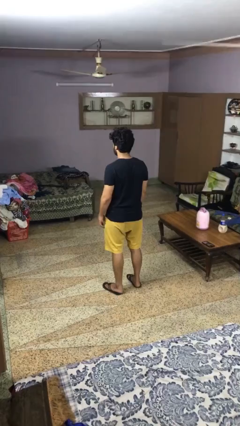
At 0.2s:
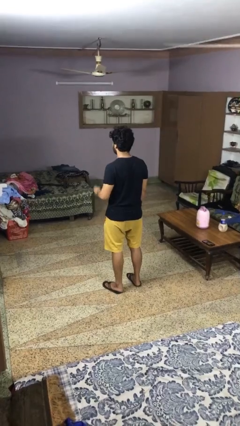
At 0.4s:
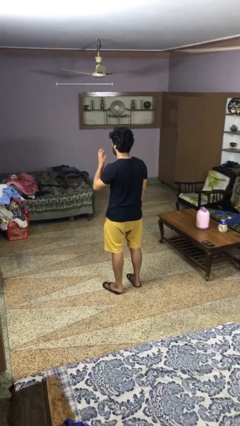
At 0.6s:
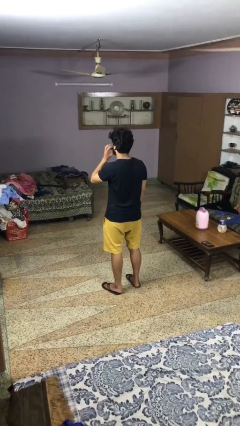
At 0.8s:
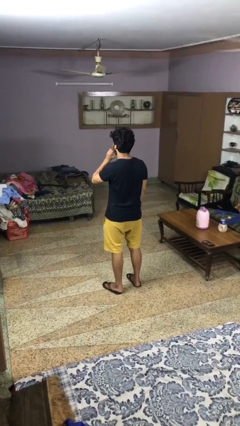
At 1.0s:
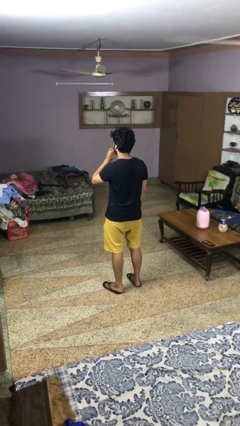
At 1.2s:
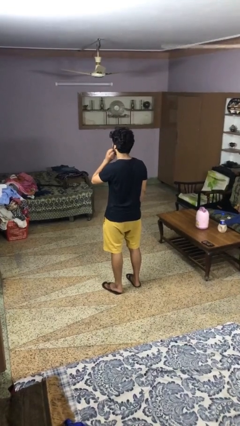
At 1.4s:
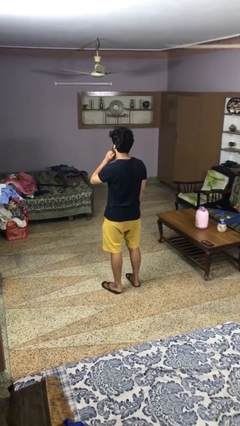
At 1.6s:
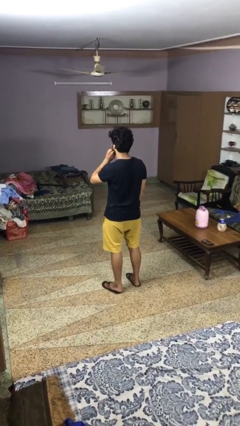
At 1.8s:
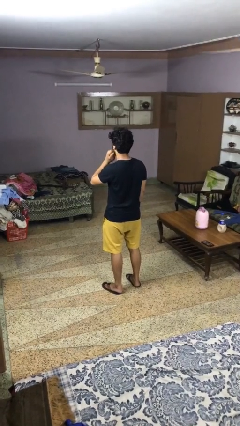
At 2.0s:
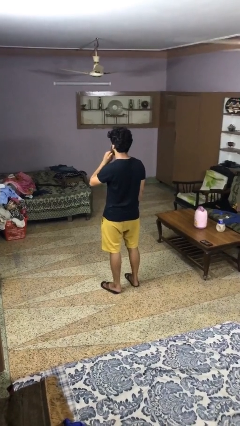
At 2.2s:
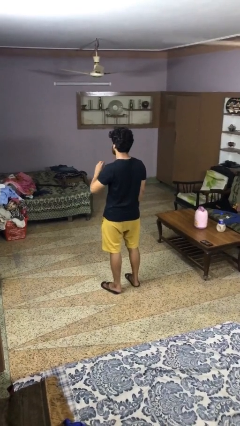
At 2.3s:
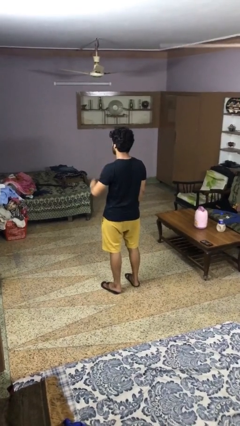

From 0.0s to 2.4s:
person scratches face

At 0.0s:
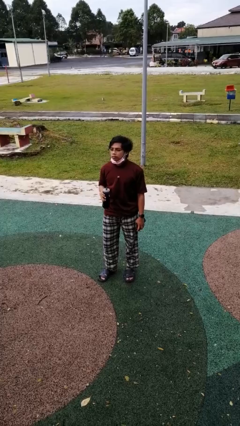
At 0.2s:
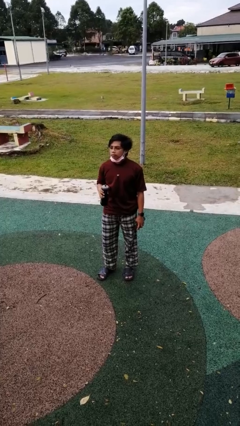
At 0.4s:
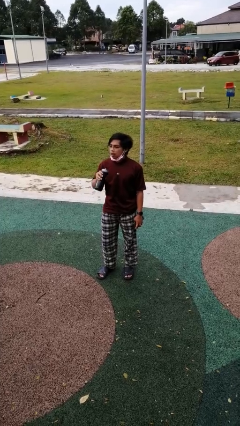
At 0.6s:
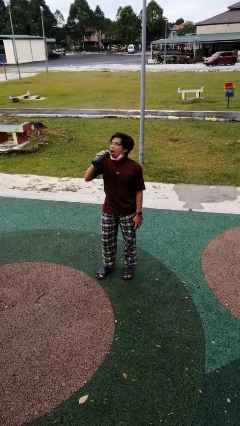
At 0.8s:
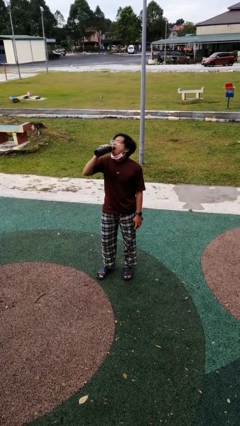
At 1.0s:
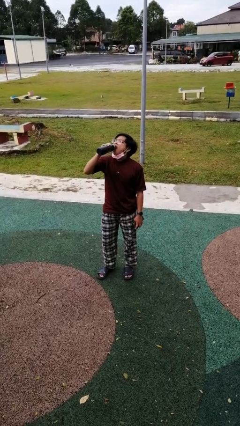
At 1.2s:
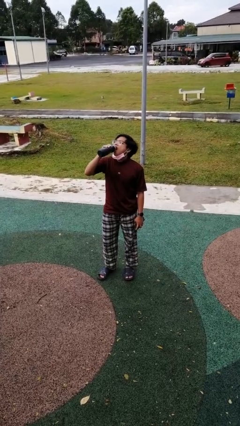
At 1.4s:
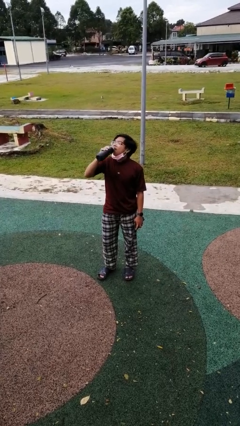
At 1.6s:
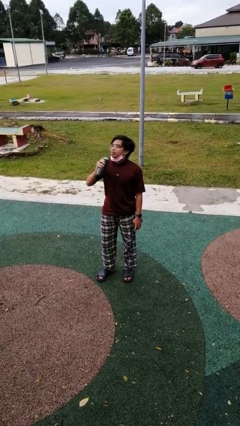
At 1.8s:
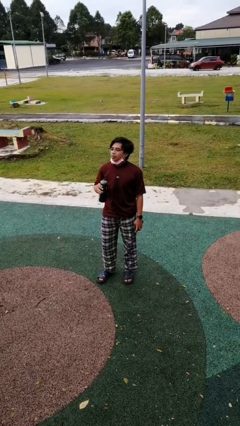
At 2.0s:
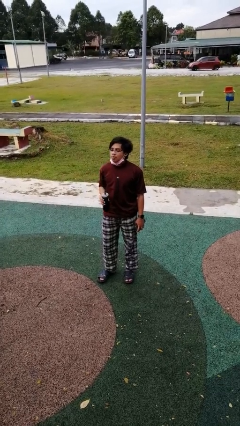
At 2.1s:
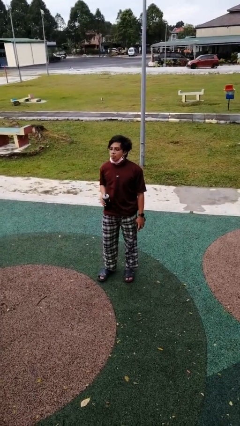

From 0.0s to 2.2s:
person drinks from bottle

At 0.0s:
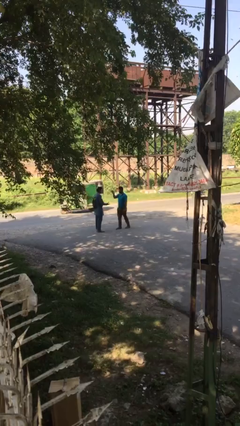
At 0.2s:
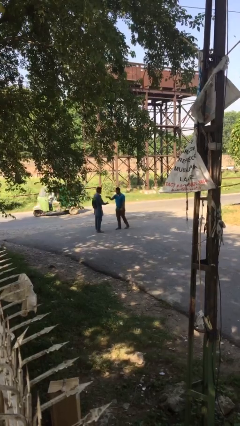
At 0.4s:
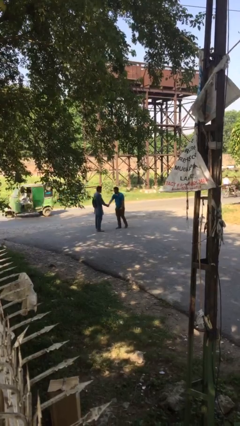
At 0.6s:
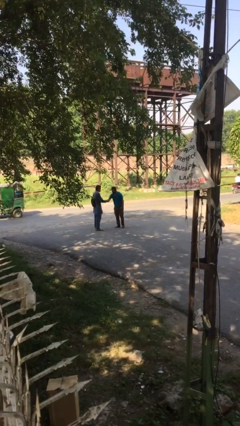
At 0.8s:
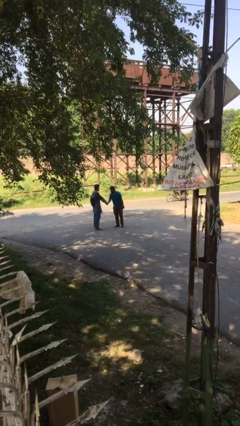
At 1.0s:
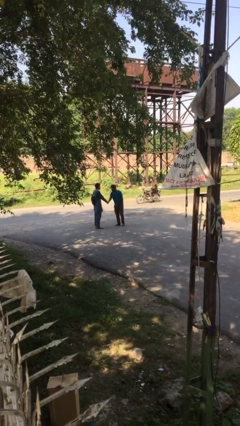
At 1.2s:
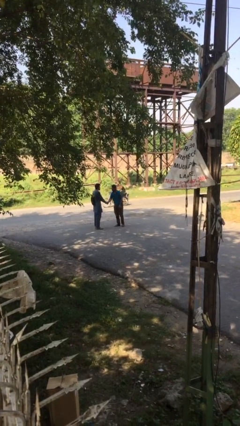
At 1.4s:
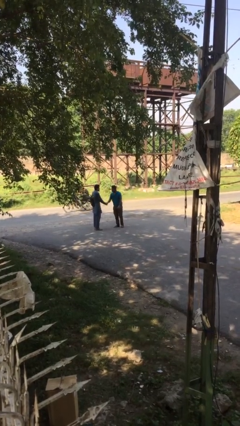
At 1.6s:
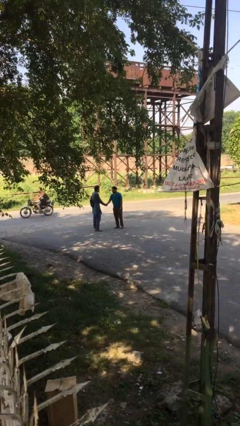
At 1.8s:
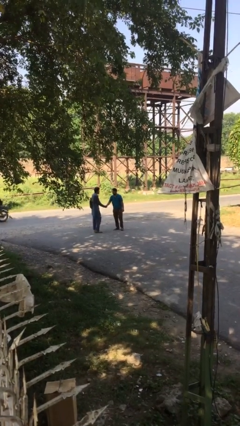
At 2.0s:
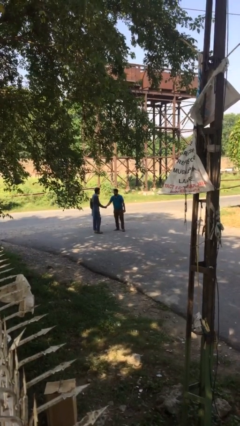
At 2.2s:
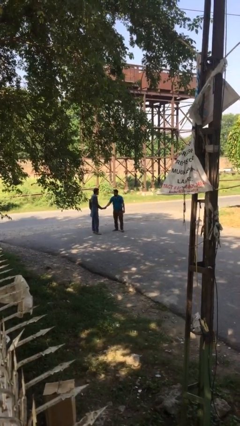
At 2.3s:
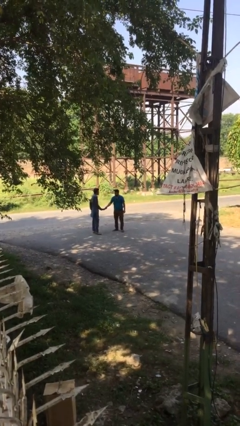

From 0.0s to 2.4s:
person shakes hand

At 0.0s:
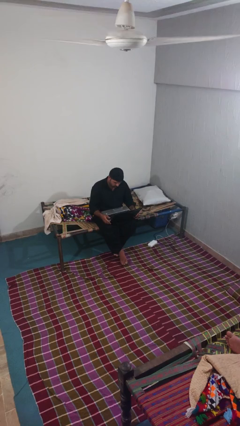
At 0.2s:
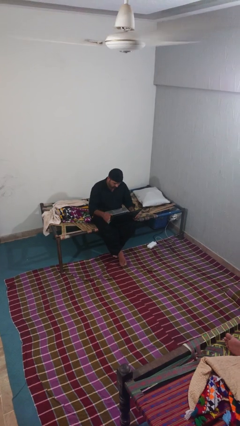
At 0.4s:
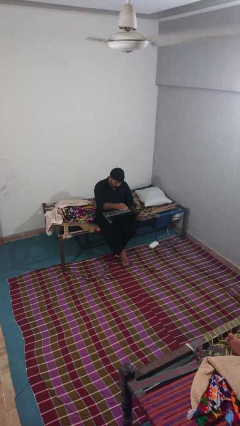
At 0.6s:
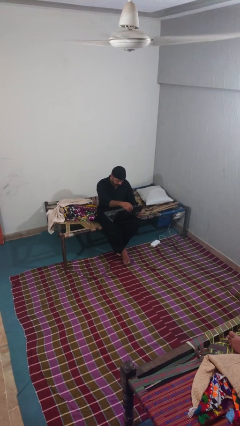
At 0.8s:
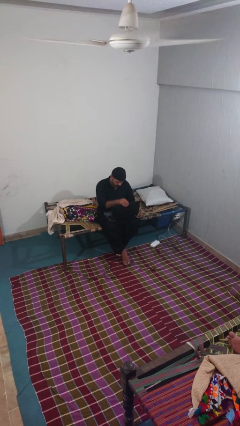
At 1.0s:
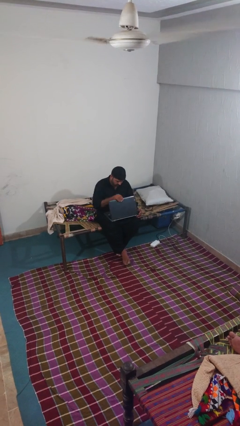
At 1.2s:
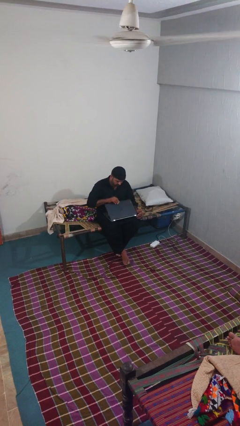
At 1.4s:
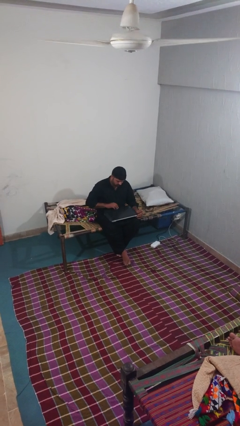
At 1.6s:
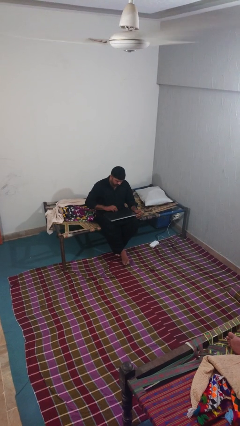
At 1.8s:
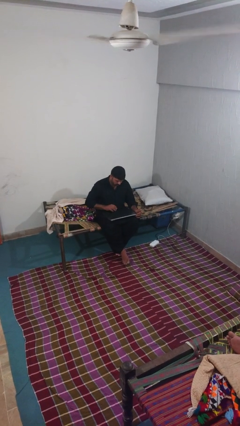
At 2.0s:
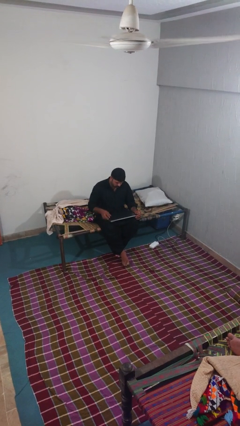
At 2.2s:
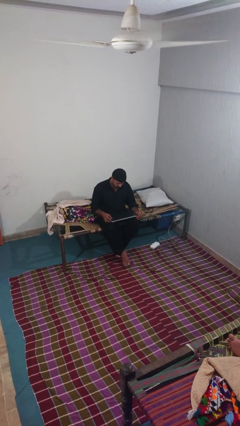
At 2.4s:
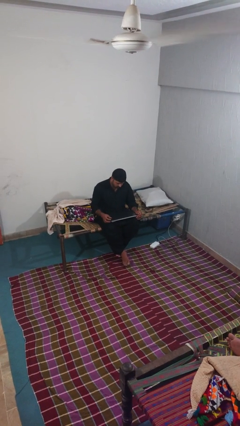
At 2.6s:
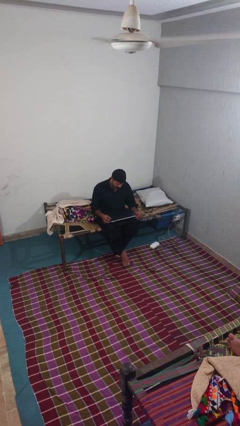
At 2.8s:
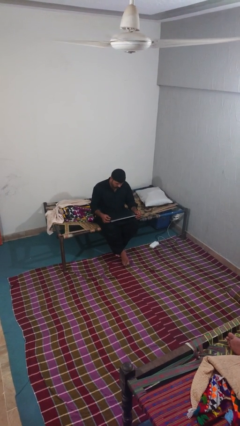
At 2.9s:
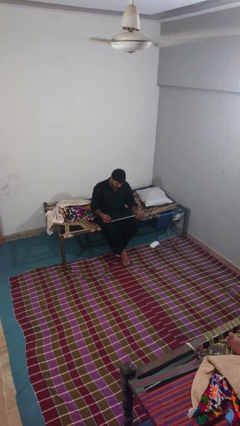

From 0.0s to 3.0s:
person closes laptop

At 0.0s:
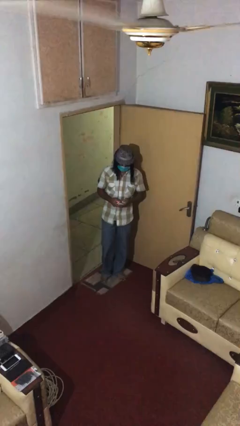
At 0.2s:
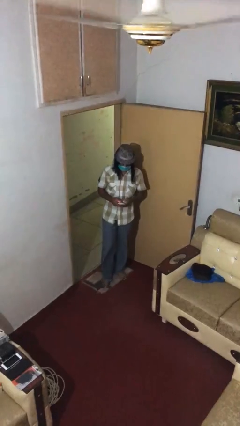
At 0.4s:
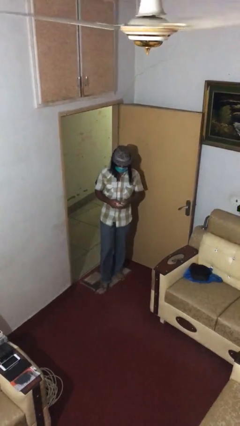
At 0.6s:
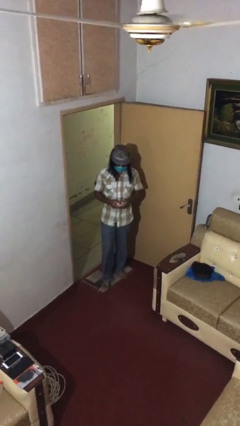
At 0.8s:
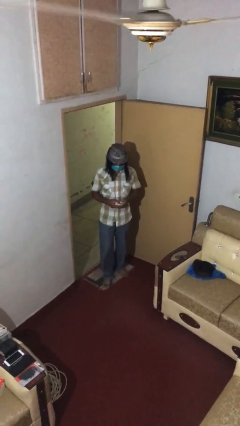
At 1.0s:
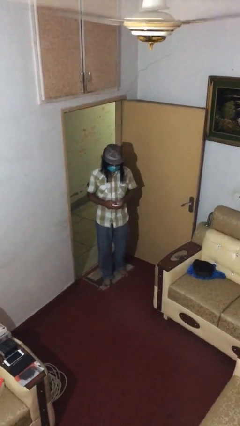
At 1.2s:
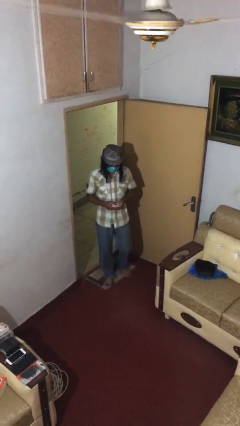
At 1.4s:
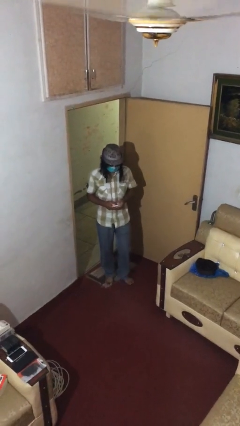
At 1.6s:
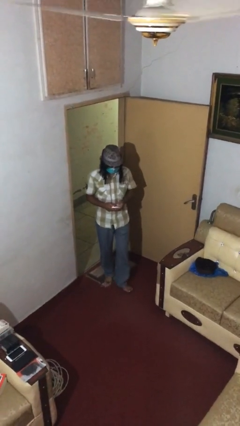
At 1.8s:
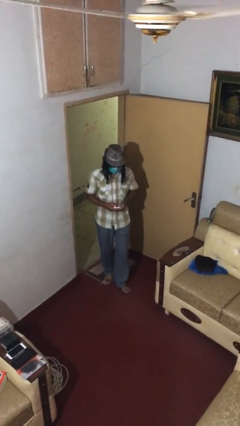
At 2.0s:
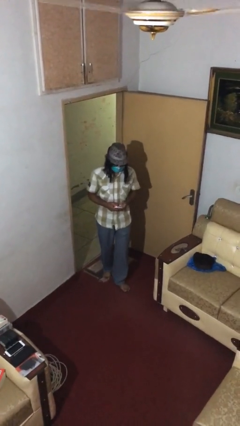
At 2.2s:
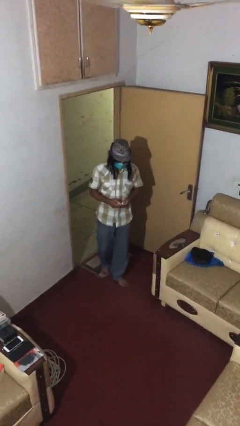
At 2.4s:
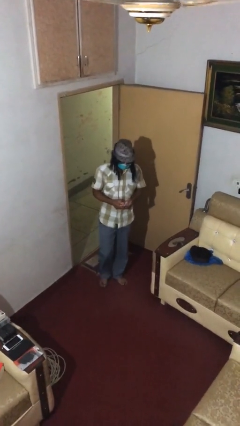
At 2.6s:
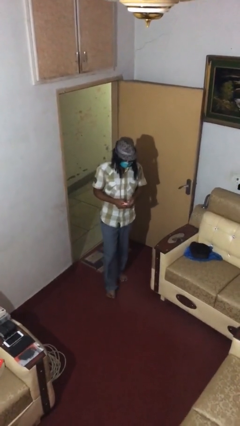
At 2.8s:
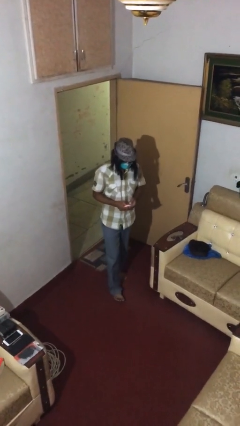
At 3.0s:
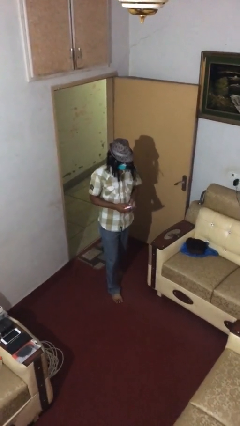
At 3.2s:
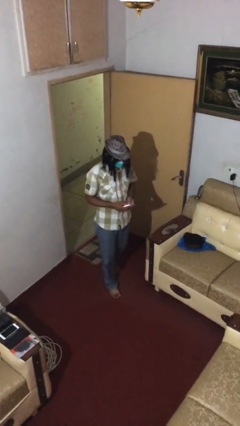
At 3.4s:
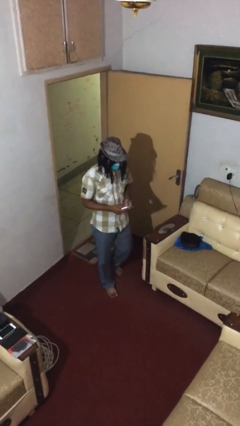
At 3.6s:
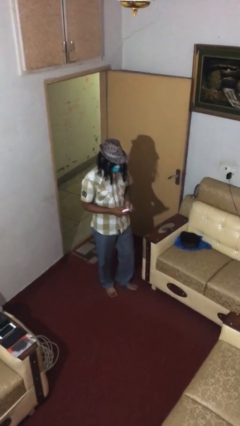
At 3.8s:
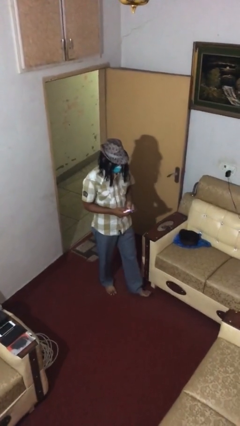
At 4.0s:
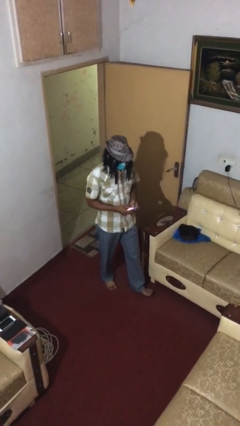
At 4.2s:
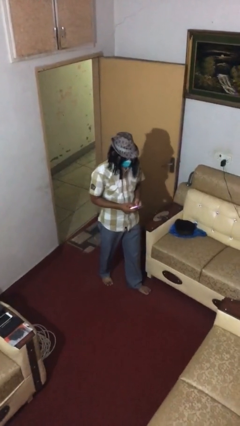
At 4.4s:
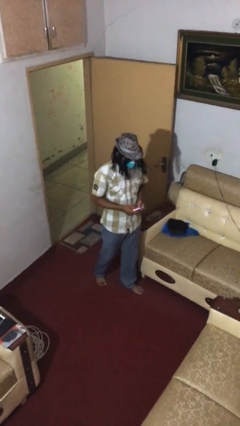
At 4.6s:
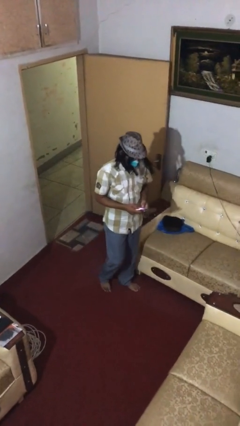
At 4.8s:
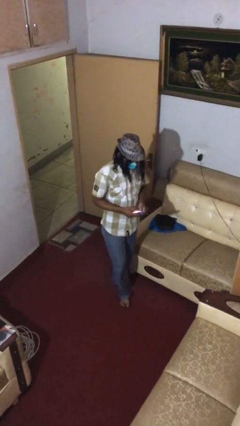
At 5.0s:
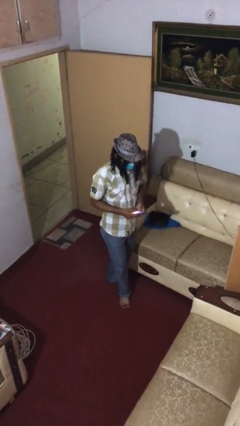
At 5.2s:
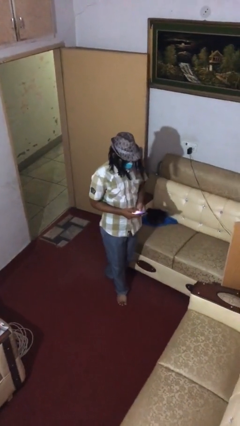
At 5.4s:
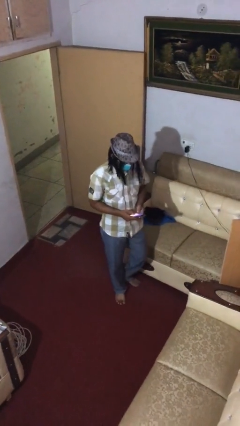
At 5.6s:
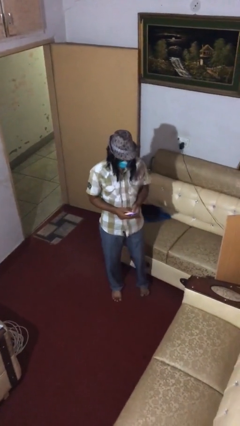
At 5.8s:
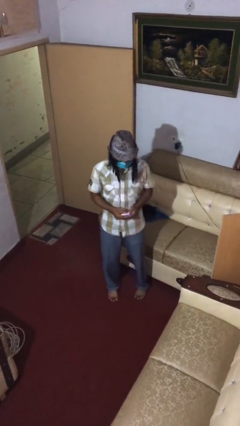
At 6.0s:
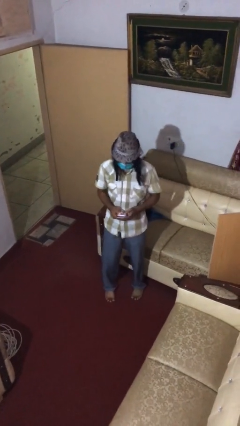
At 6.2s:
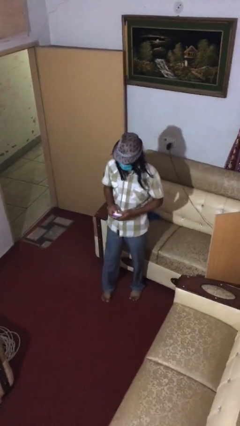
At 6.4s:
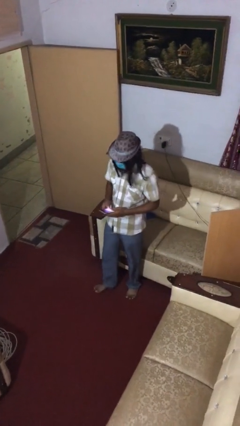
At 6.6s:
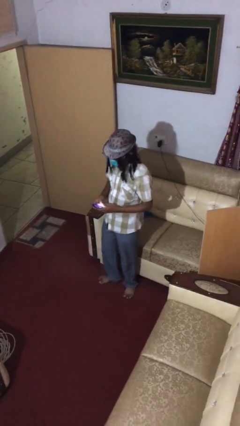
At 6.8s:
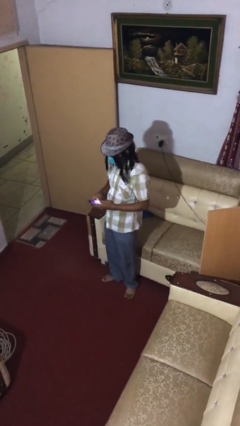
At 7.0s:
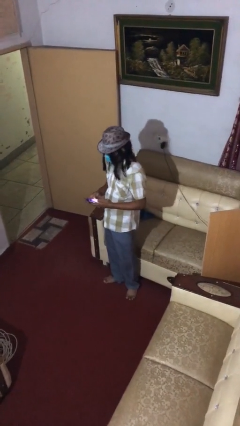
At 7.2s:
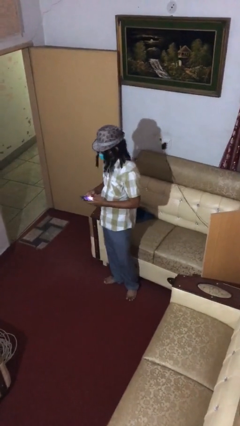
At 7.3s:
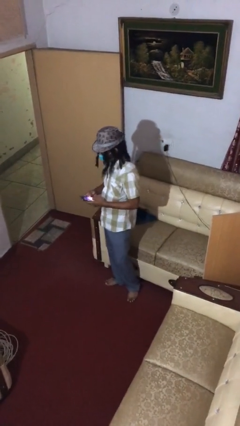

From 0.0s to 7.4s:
person texts on phone

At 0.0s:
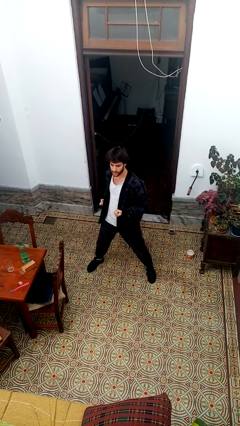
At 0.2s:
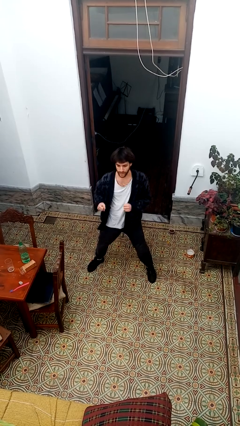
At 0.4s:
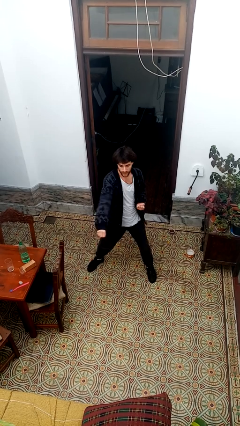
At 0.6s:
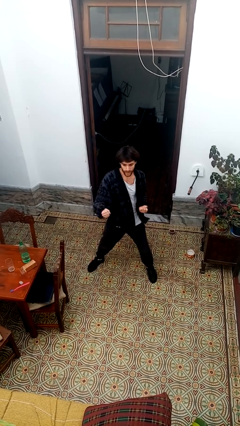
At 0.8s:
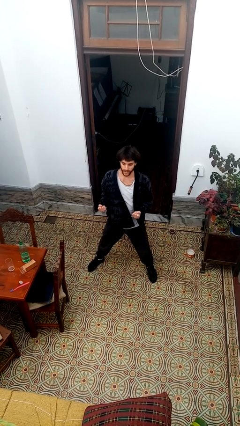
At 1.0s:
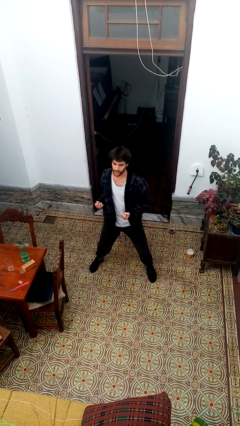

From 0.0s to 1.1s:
person punches
